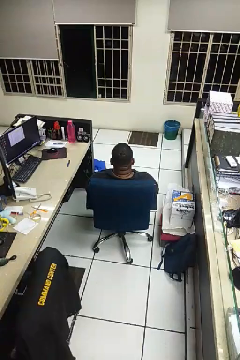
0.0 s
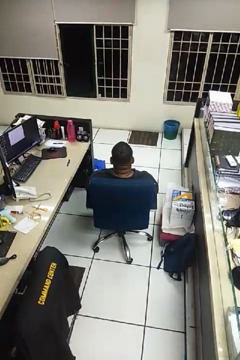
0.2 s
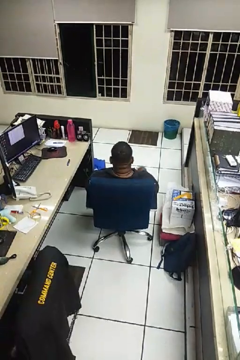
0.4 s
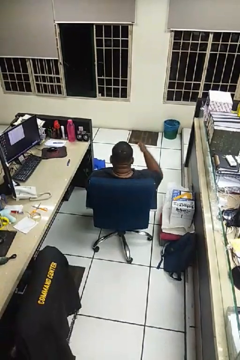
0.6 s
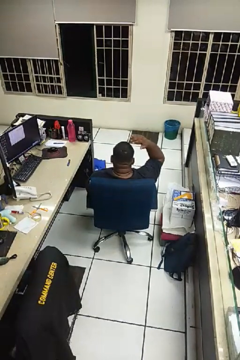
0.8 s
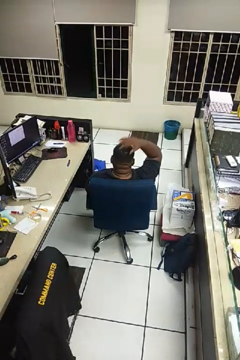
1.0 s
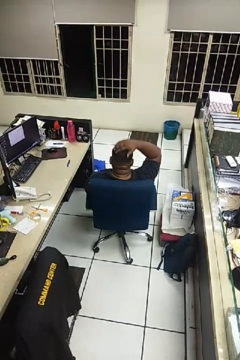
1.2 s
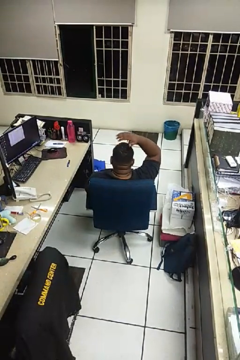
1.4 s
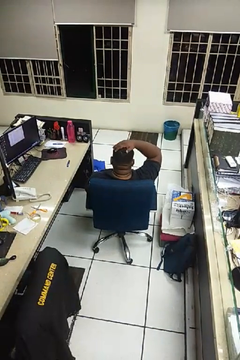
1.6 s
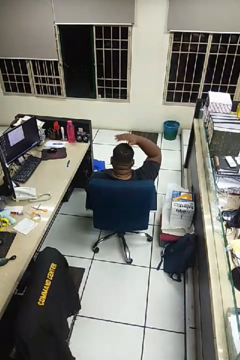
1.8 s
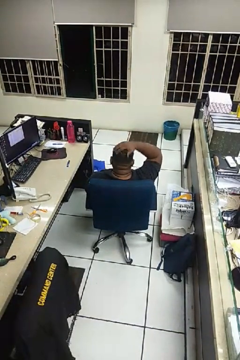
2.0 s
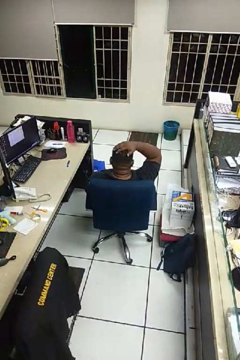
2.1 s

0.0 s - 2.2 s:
person pats head

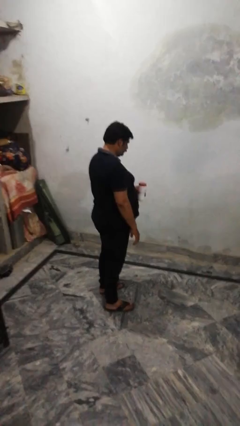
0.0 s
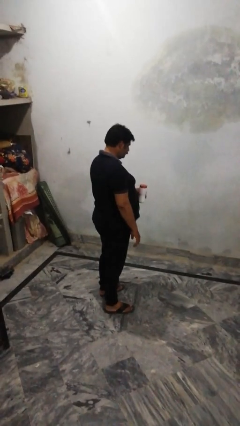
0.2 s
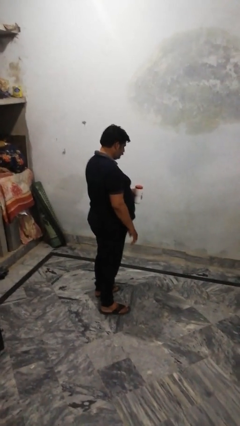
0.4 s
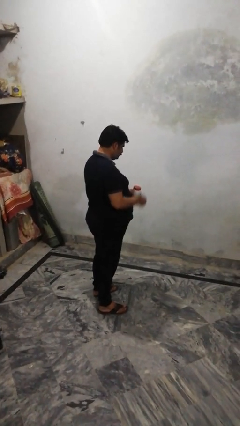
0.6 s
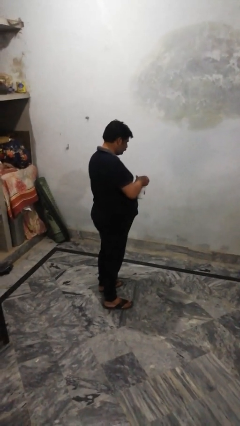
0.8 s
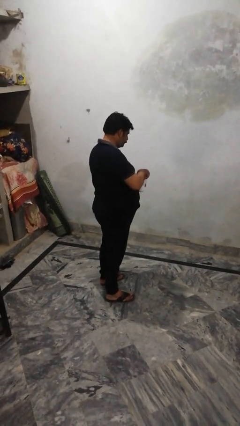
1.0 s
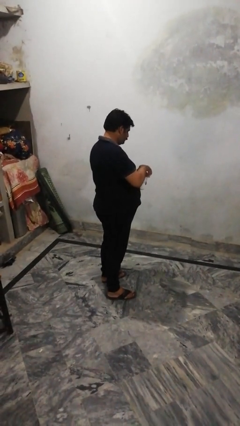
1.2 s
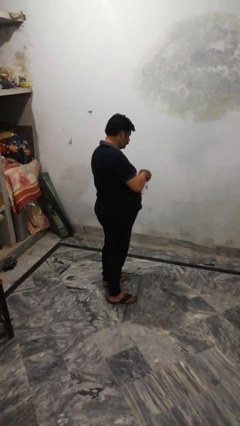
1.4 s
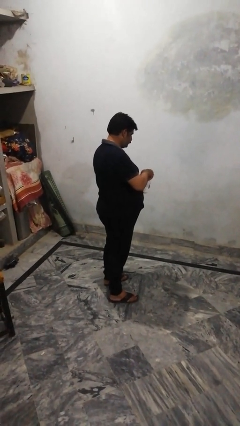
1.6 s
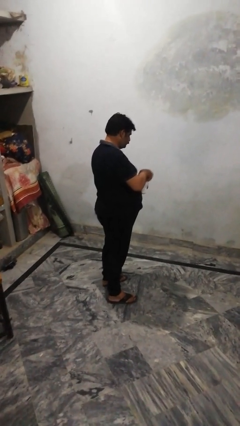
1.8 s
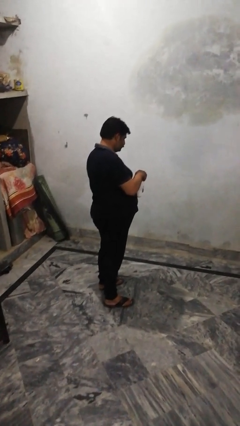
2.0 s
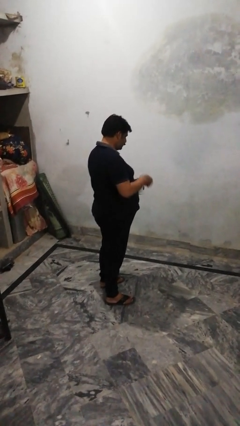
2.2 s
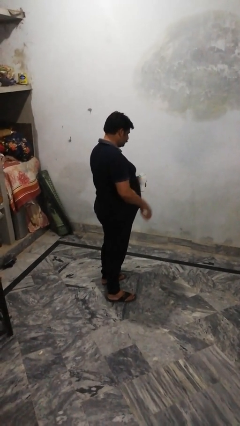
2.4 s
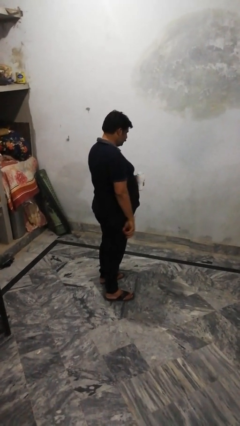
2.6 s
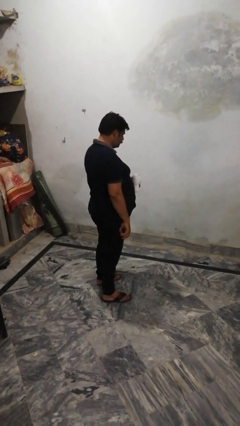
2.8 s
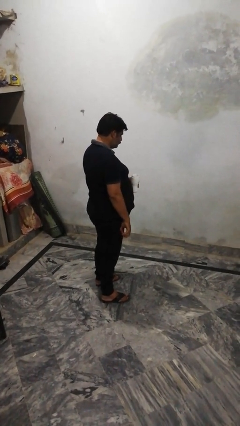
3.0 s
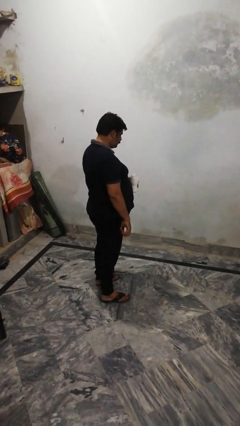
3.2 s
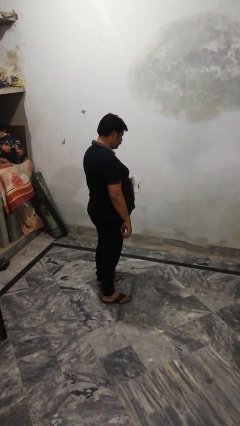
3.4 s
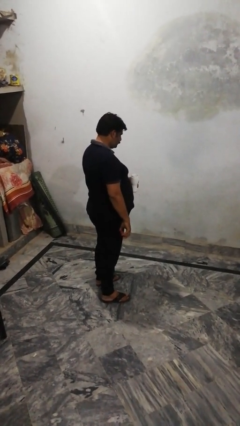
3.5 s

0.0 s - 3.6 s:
person opens jar

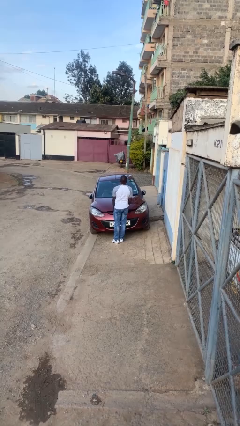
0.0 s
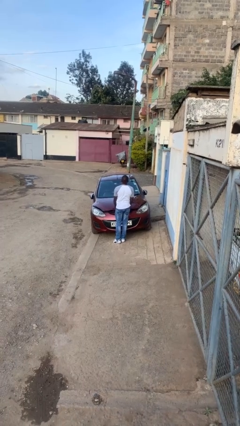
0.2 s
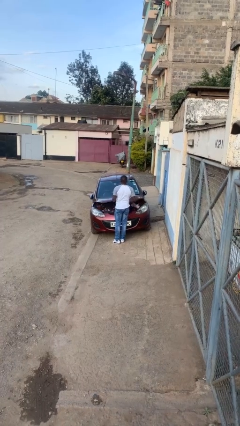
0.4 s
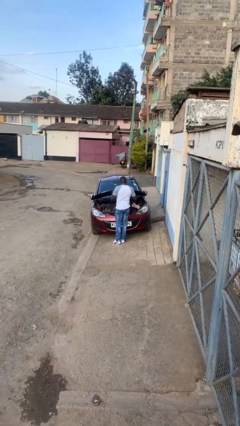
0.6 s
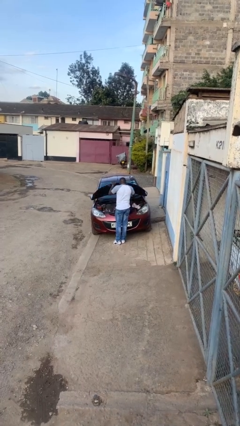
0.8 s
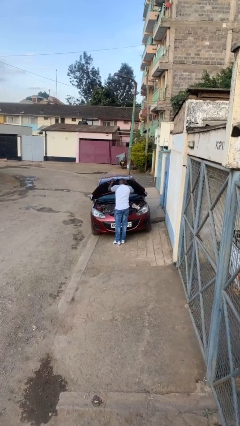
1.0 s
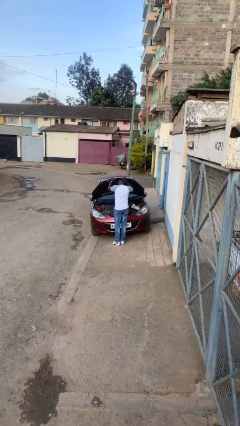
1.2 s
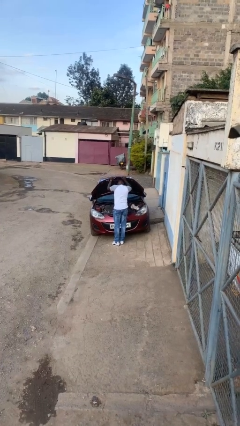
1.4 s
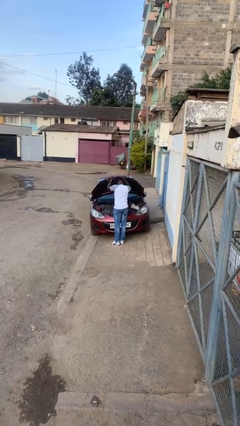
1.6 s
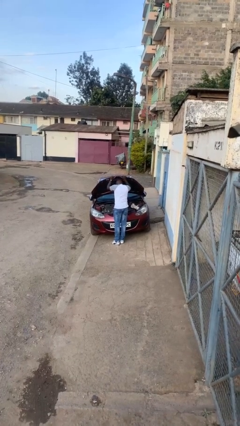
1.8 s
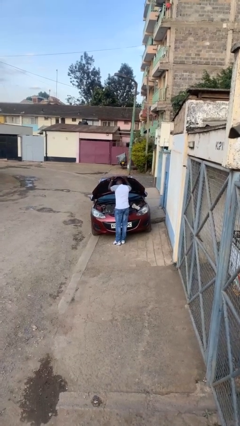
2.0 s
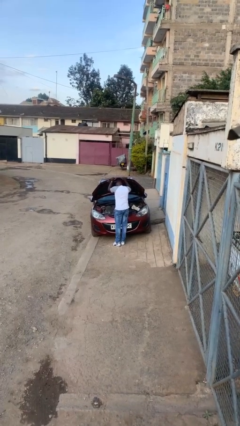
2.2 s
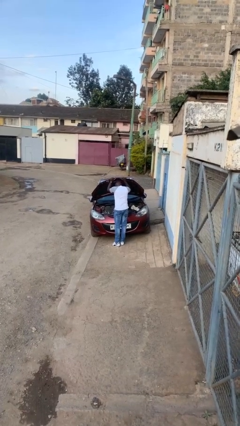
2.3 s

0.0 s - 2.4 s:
person opens car hood

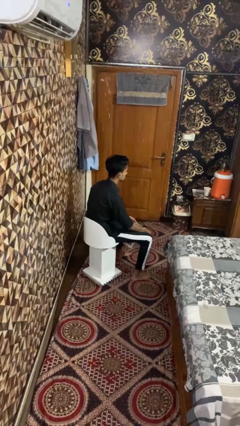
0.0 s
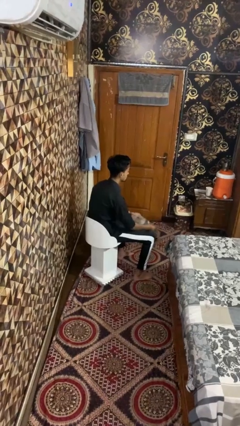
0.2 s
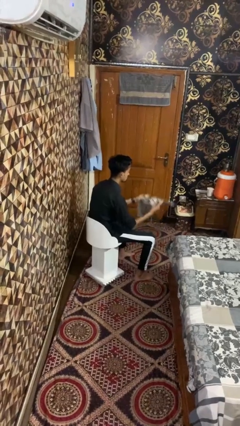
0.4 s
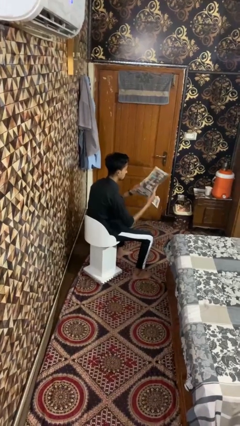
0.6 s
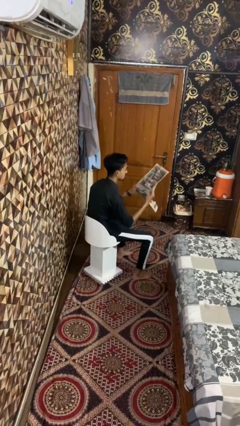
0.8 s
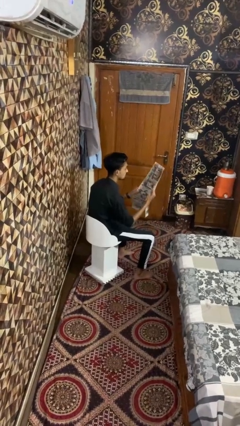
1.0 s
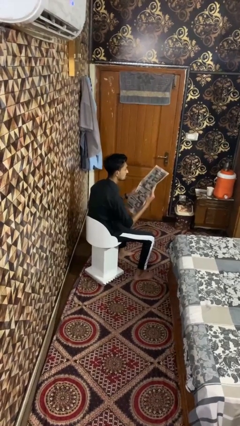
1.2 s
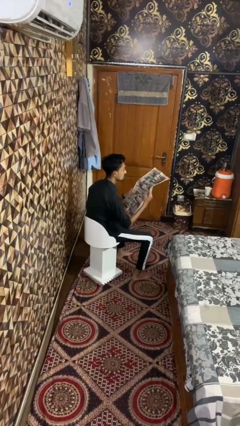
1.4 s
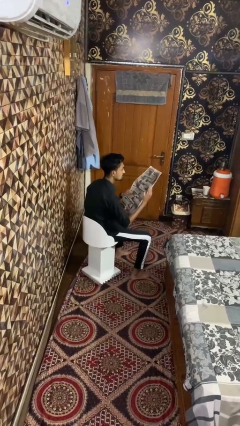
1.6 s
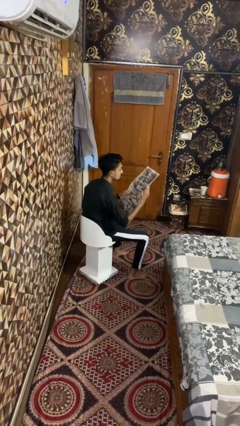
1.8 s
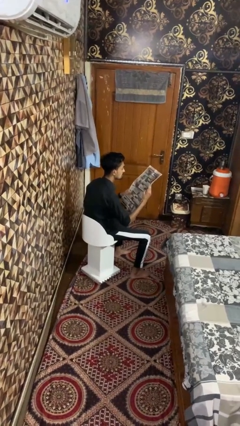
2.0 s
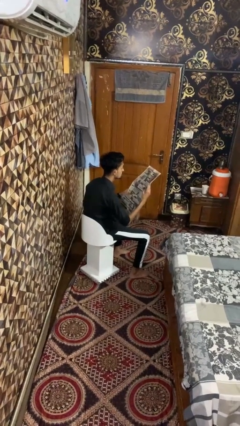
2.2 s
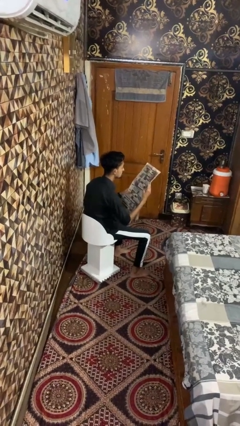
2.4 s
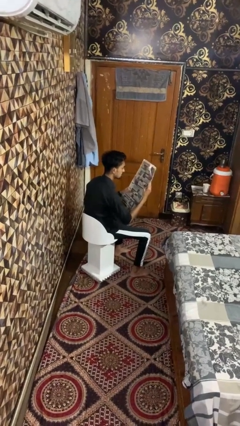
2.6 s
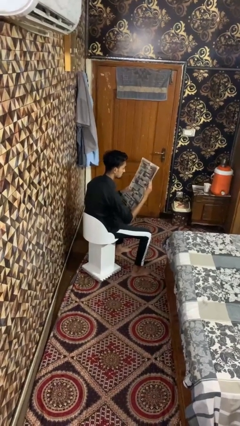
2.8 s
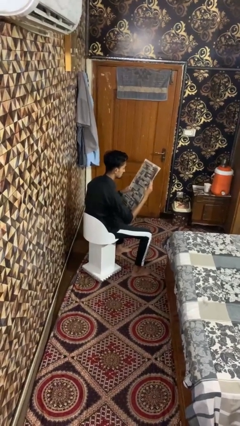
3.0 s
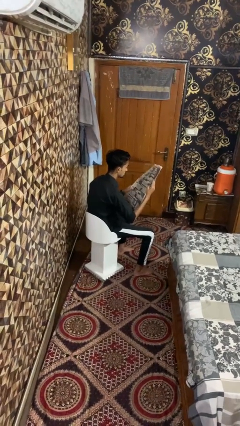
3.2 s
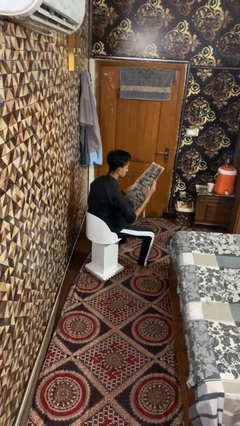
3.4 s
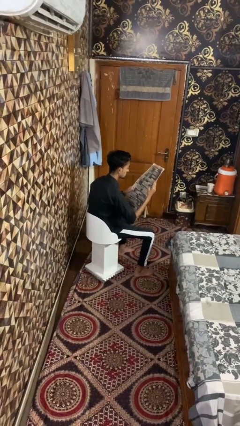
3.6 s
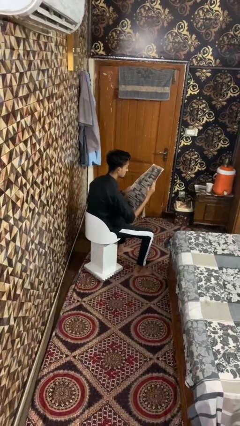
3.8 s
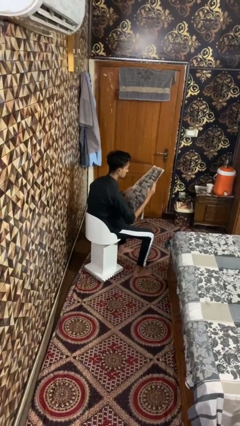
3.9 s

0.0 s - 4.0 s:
person reads newspaper

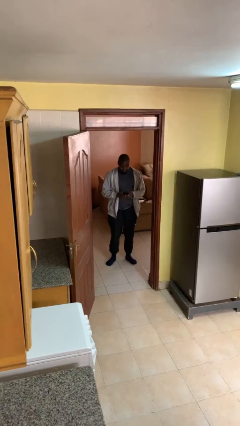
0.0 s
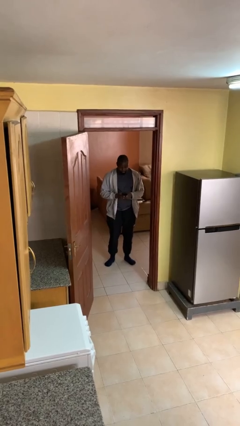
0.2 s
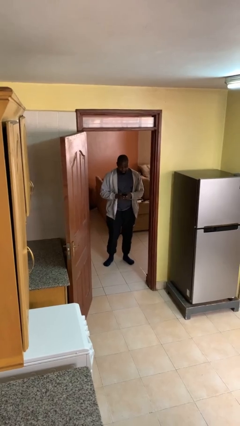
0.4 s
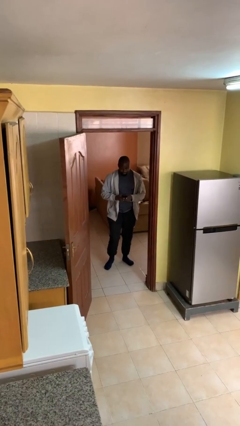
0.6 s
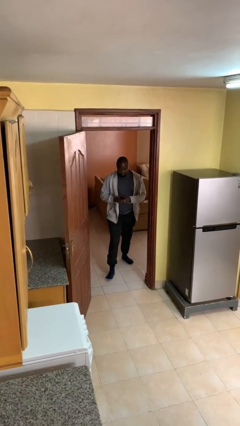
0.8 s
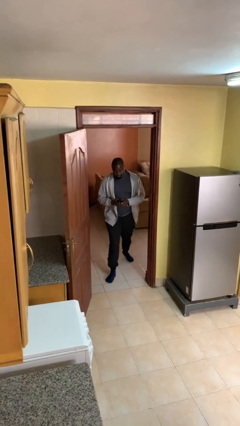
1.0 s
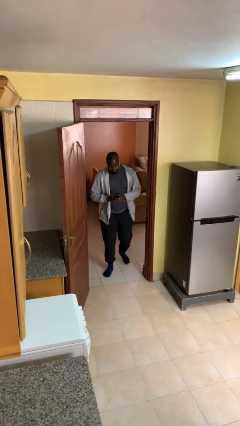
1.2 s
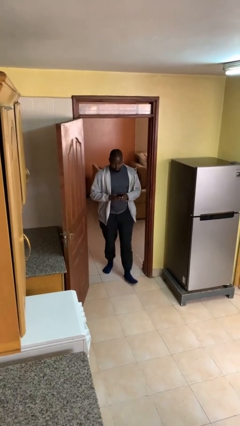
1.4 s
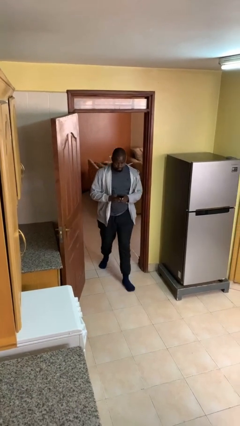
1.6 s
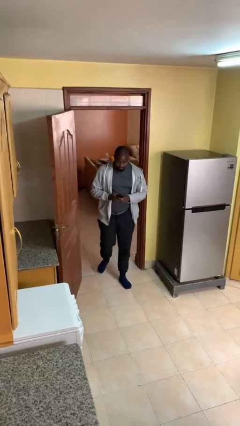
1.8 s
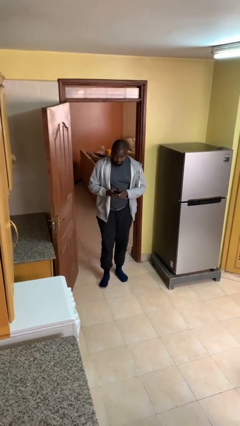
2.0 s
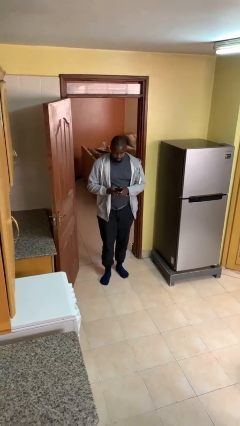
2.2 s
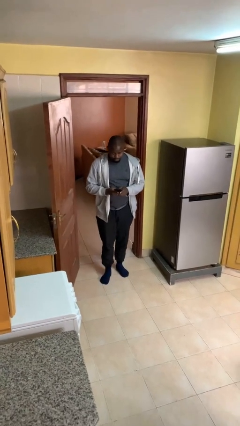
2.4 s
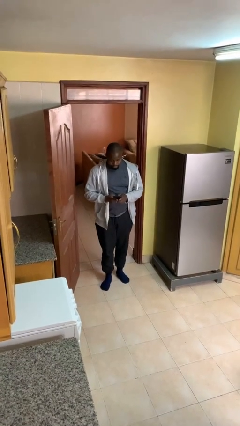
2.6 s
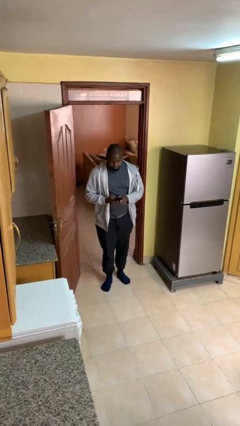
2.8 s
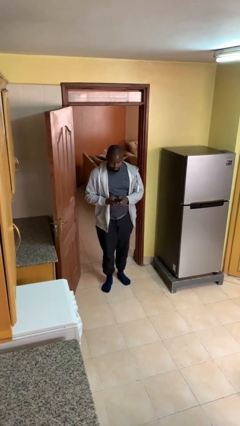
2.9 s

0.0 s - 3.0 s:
person enters scene through structure

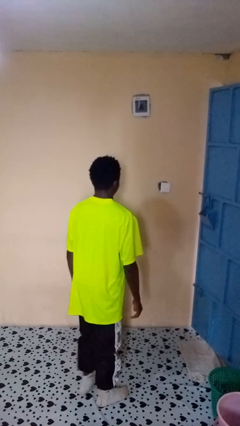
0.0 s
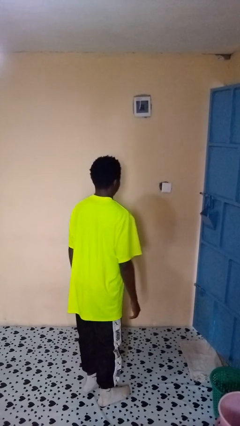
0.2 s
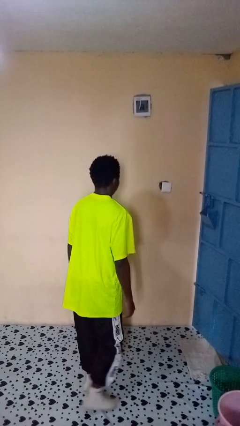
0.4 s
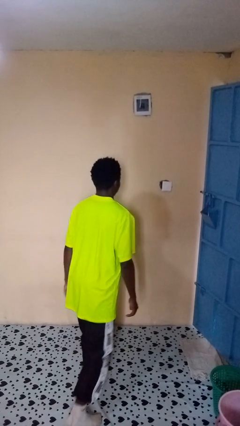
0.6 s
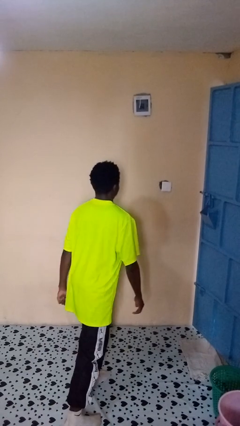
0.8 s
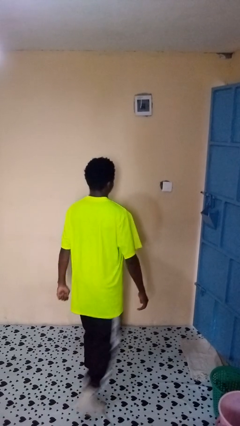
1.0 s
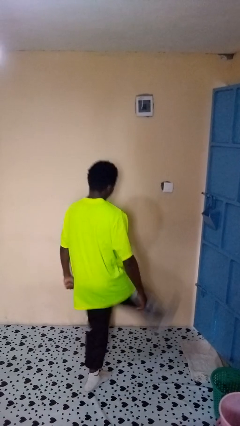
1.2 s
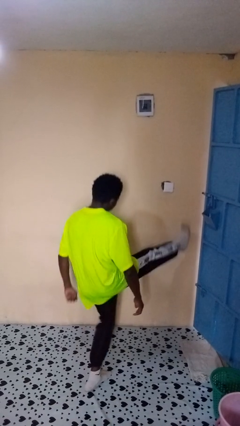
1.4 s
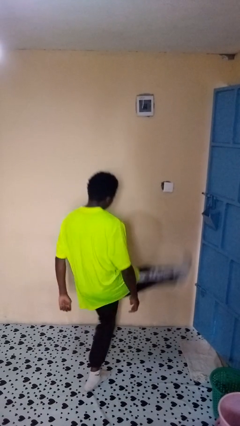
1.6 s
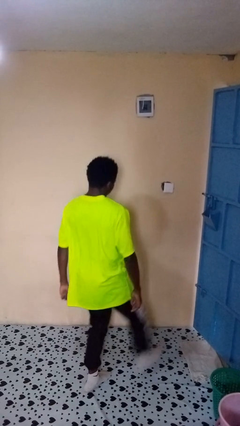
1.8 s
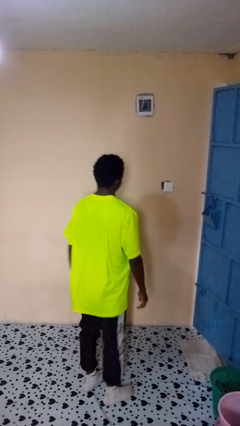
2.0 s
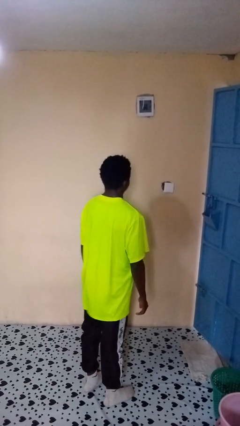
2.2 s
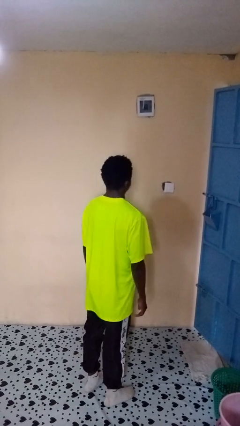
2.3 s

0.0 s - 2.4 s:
person karate kicks

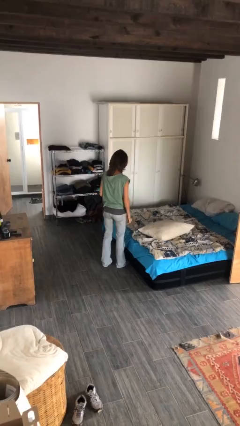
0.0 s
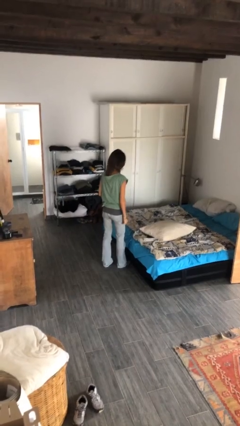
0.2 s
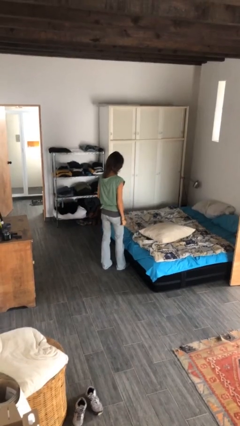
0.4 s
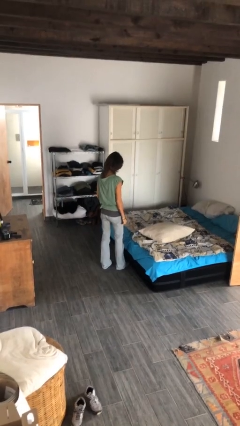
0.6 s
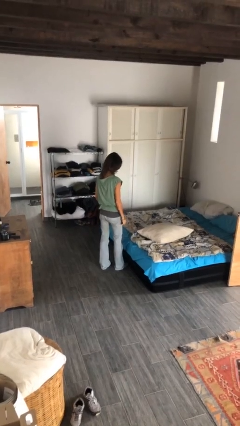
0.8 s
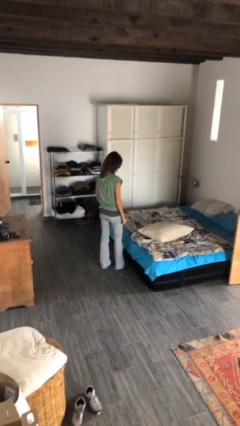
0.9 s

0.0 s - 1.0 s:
person puts down object on bed
